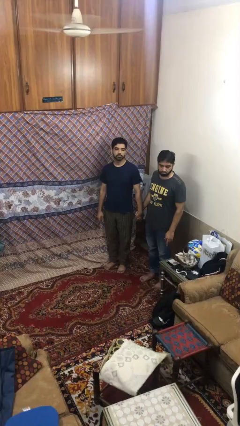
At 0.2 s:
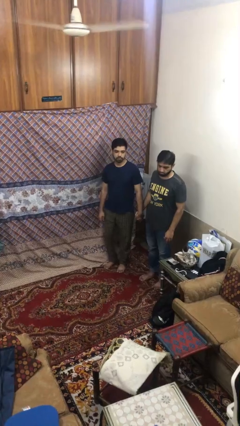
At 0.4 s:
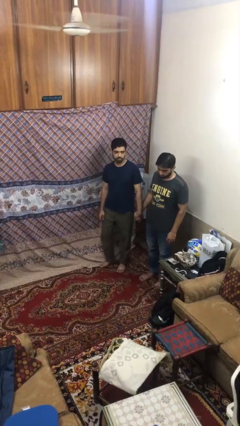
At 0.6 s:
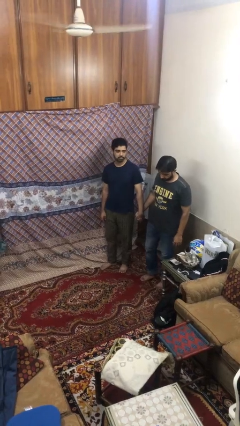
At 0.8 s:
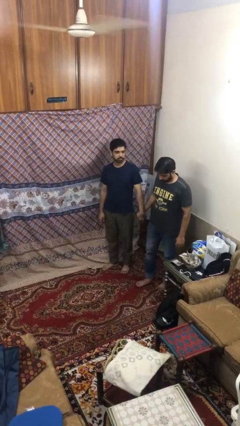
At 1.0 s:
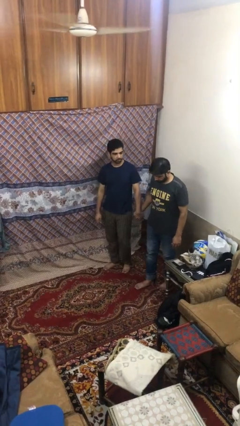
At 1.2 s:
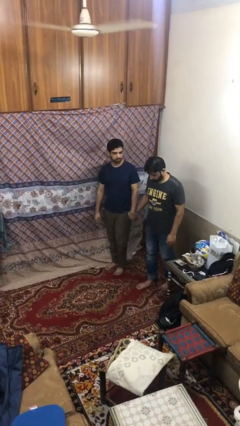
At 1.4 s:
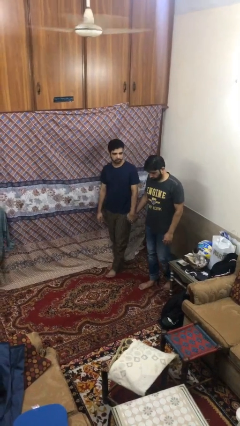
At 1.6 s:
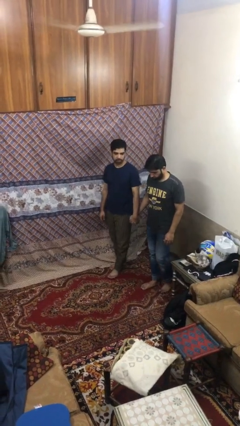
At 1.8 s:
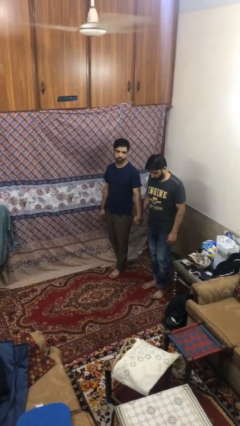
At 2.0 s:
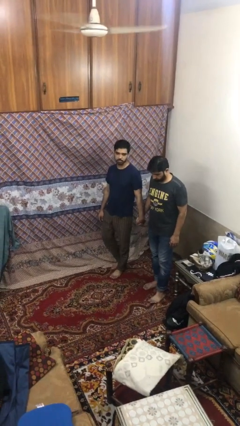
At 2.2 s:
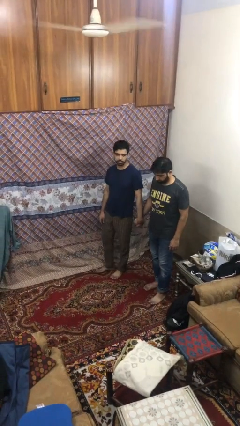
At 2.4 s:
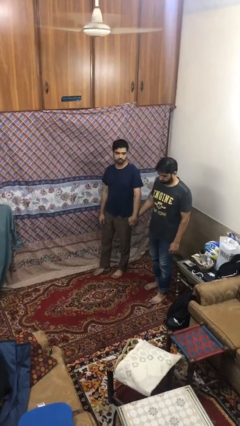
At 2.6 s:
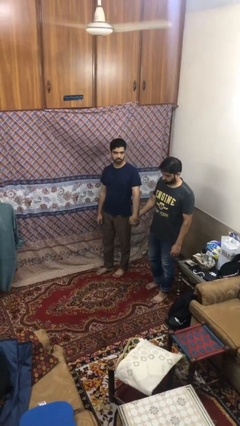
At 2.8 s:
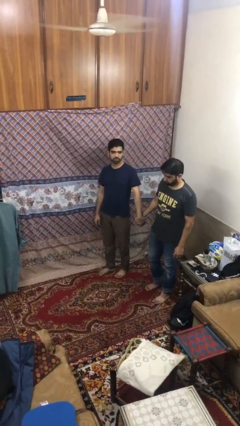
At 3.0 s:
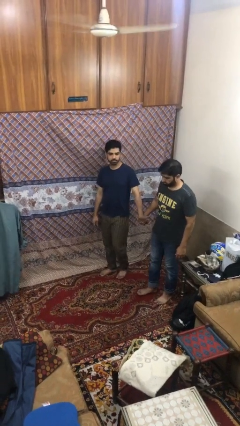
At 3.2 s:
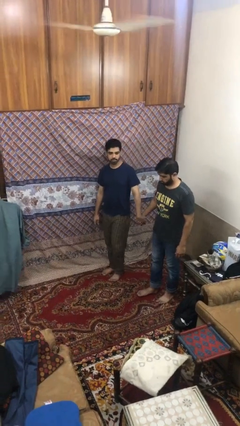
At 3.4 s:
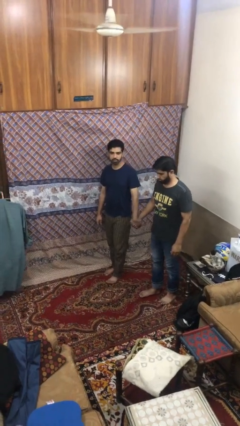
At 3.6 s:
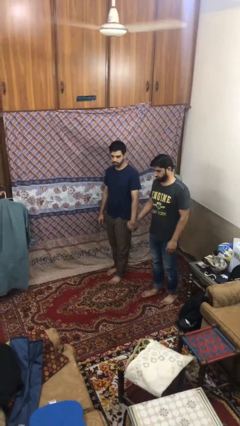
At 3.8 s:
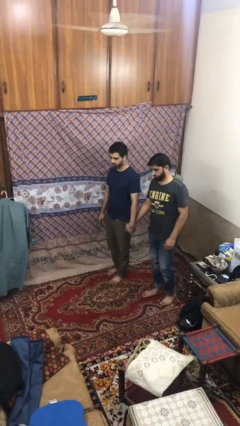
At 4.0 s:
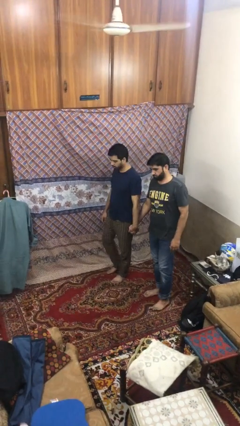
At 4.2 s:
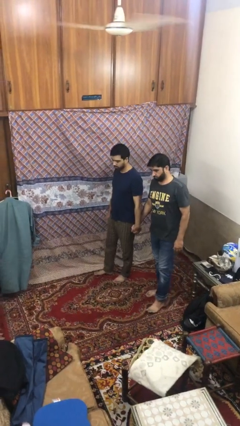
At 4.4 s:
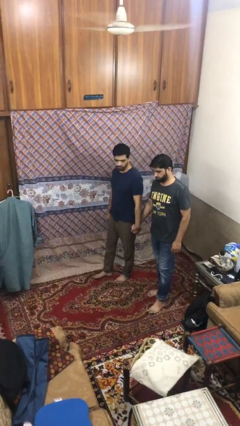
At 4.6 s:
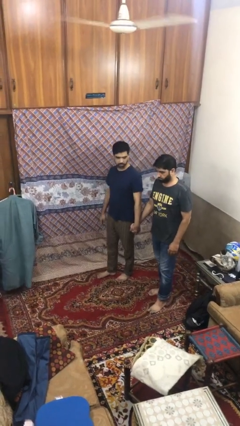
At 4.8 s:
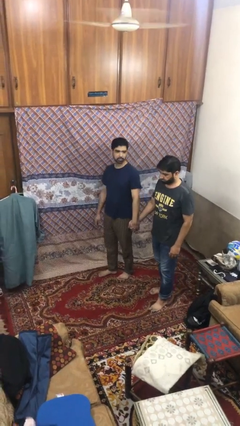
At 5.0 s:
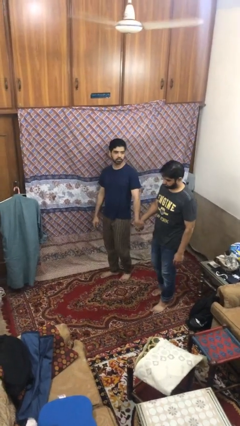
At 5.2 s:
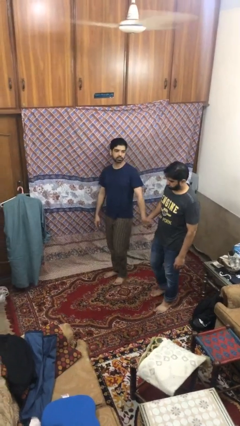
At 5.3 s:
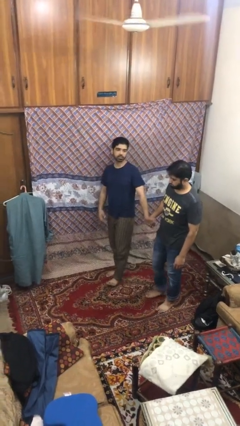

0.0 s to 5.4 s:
person holds hand

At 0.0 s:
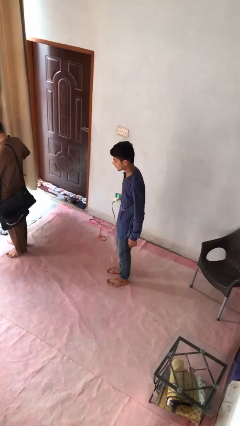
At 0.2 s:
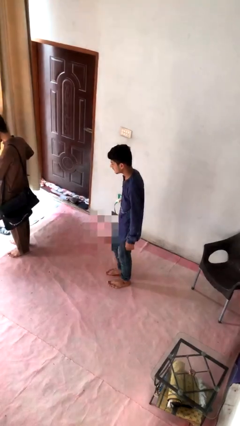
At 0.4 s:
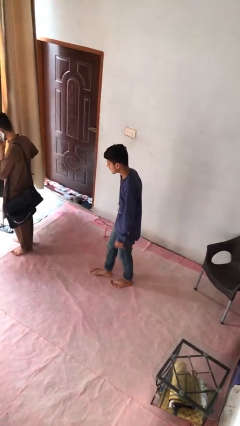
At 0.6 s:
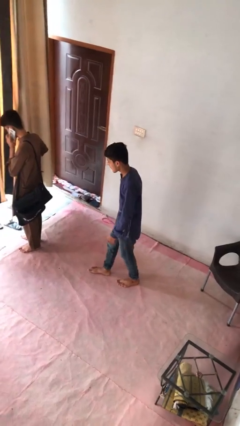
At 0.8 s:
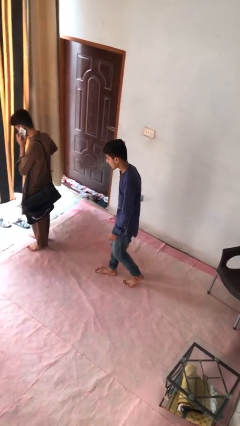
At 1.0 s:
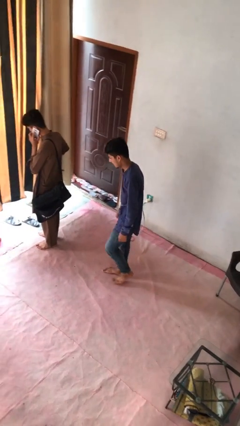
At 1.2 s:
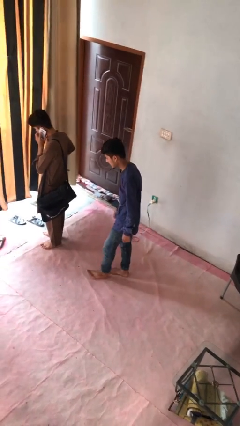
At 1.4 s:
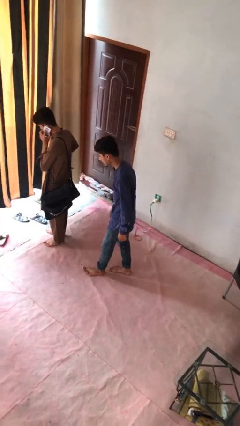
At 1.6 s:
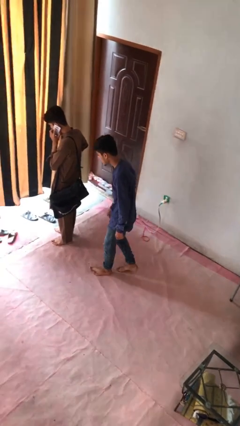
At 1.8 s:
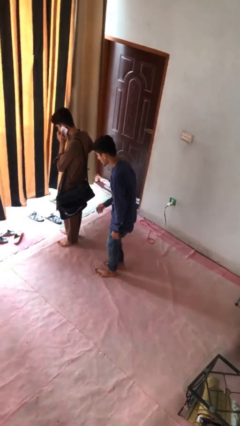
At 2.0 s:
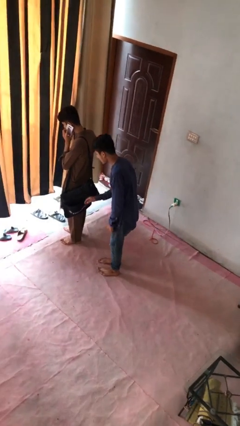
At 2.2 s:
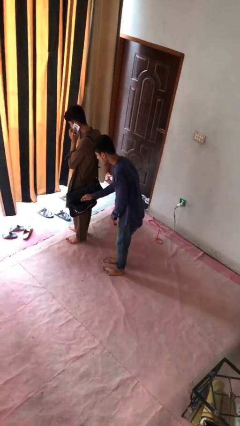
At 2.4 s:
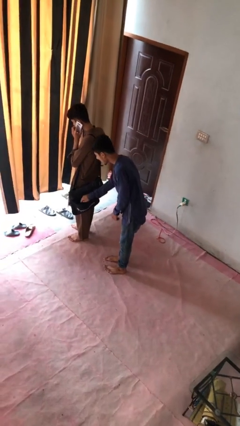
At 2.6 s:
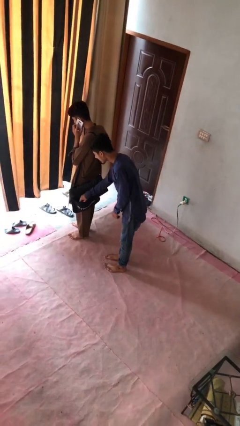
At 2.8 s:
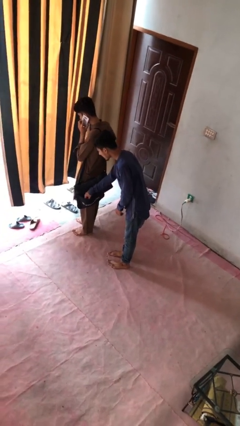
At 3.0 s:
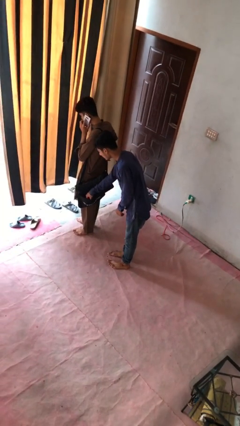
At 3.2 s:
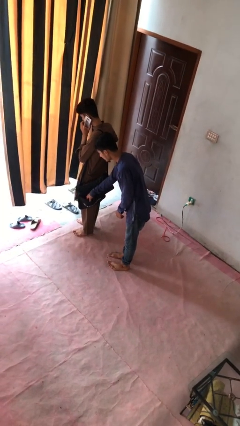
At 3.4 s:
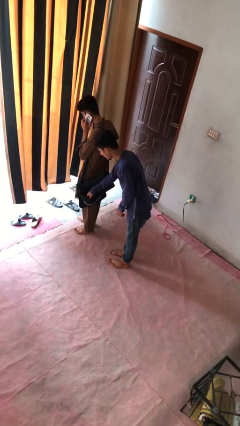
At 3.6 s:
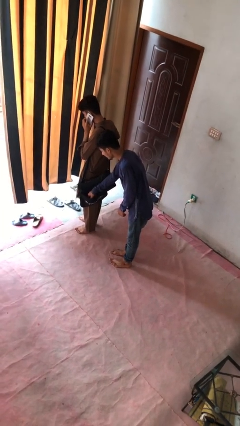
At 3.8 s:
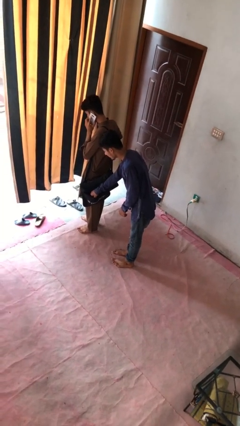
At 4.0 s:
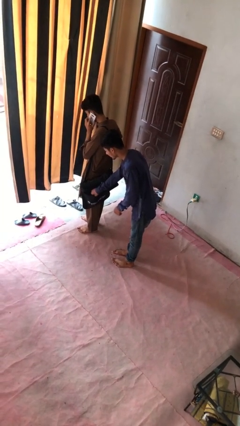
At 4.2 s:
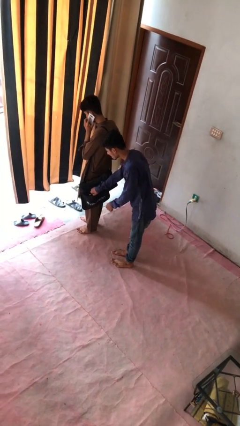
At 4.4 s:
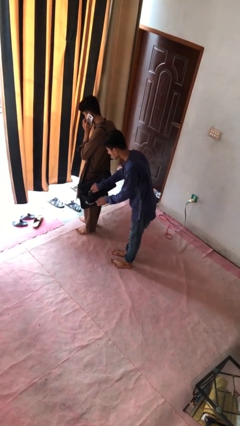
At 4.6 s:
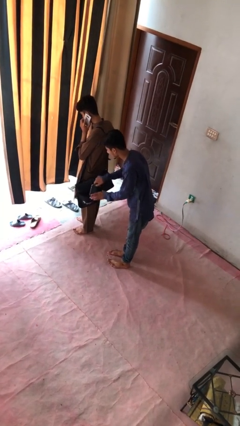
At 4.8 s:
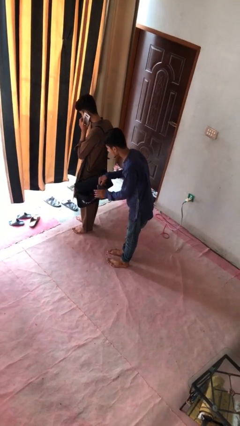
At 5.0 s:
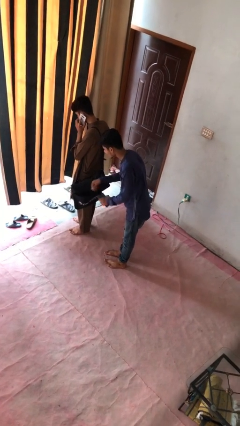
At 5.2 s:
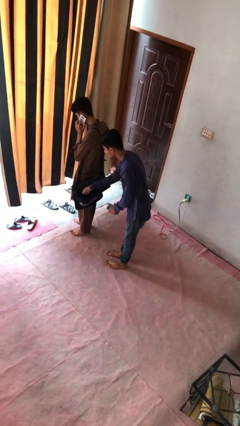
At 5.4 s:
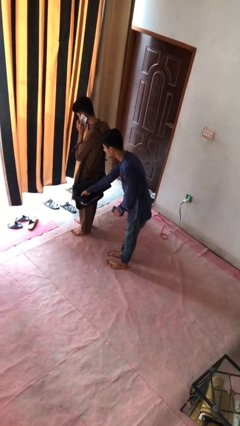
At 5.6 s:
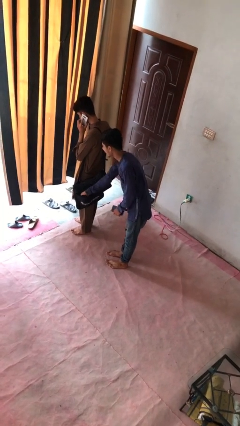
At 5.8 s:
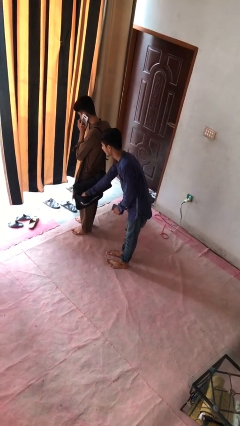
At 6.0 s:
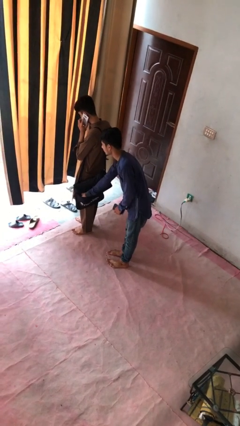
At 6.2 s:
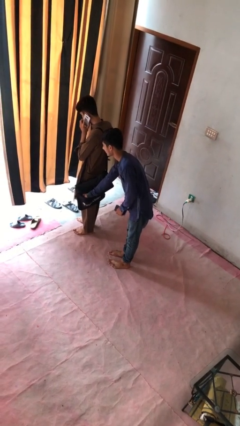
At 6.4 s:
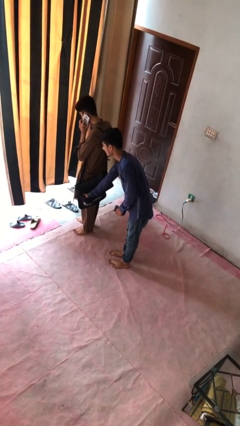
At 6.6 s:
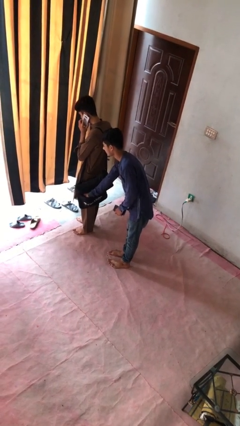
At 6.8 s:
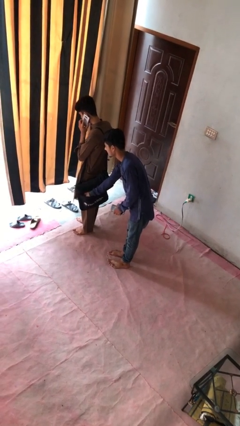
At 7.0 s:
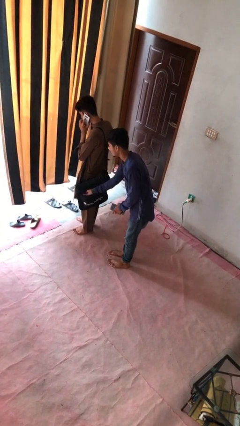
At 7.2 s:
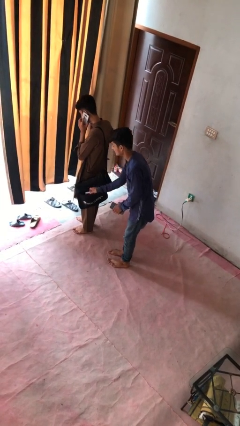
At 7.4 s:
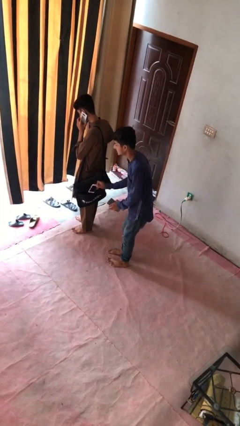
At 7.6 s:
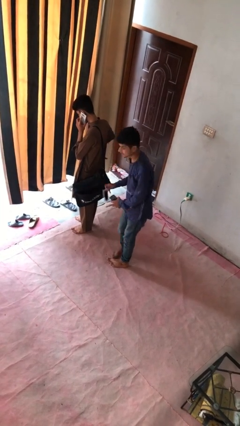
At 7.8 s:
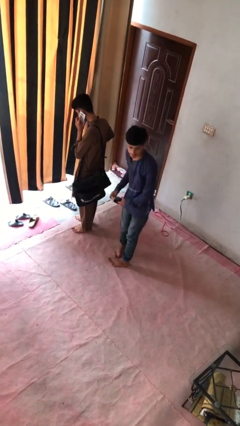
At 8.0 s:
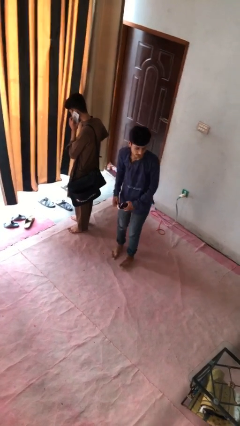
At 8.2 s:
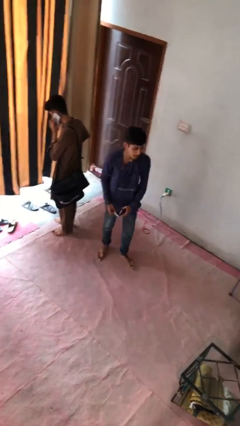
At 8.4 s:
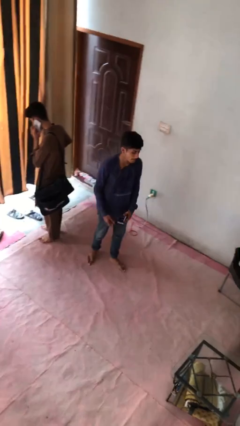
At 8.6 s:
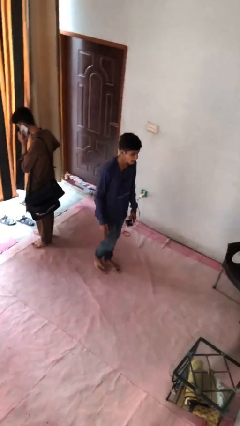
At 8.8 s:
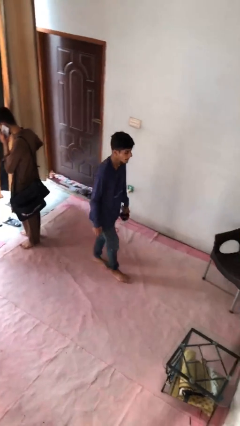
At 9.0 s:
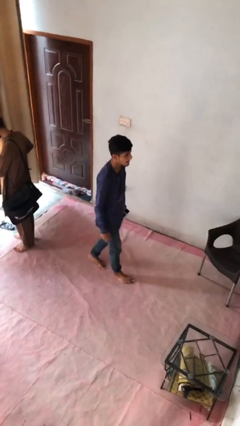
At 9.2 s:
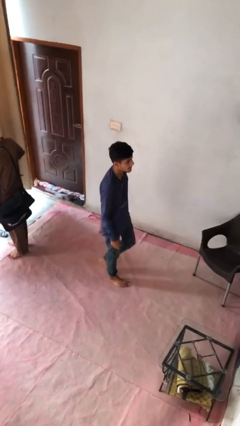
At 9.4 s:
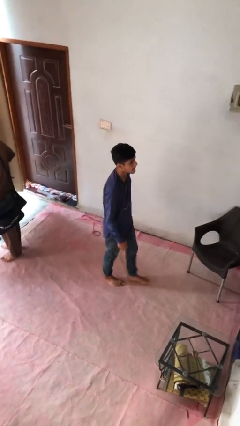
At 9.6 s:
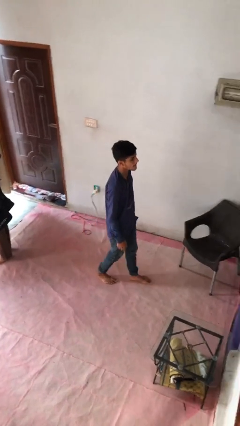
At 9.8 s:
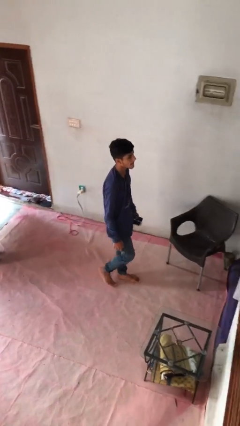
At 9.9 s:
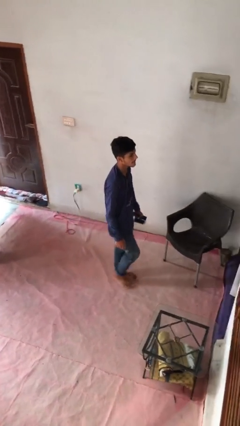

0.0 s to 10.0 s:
person steals object from person

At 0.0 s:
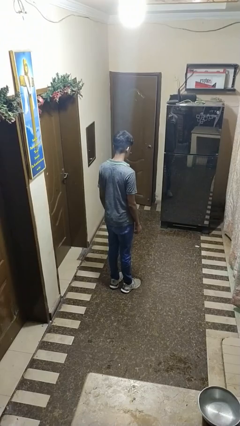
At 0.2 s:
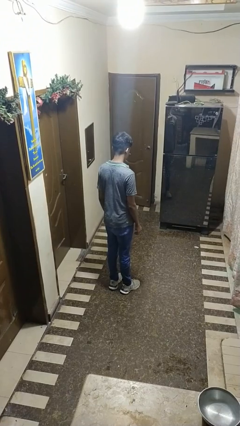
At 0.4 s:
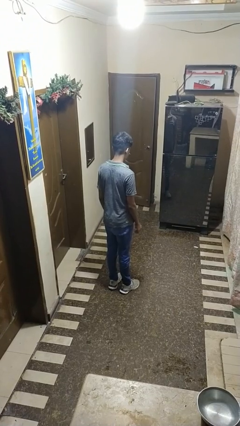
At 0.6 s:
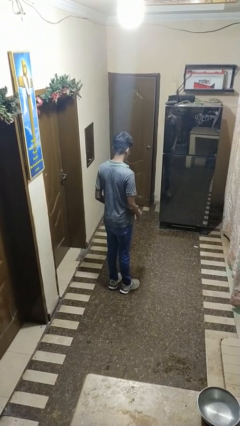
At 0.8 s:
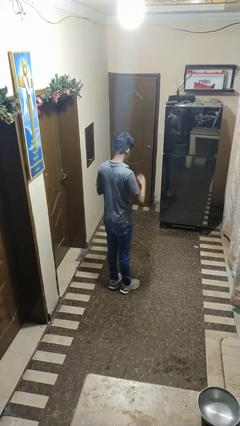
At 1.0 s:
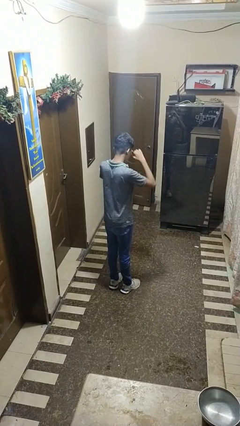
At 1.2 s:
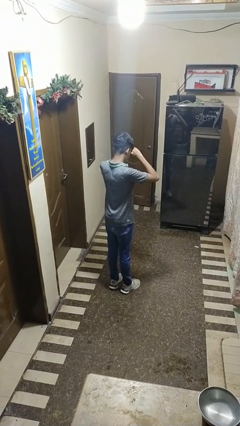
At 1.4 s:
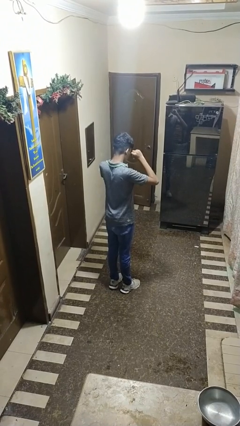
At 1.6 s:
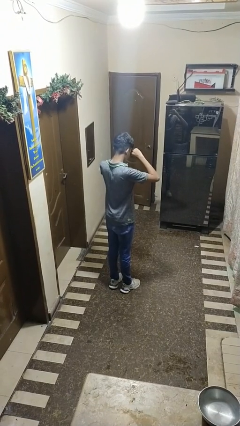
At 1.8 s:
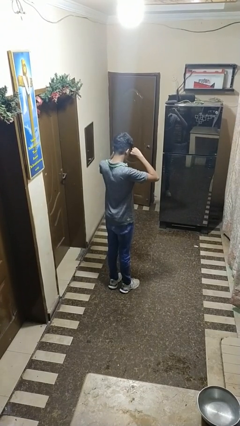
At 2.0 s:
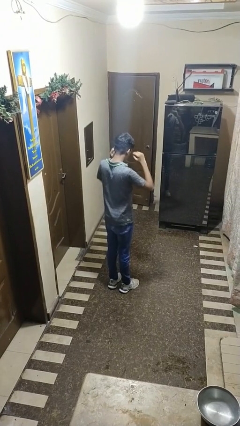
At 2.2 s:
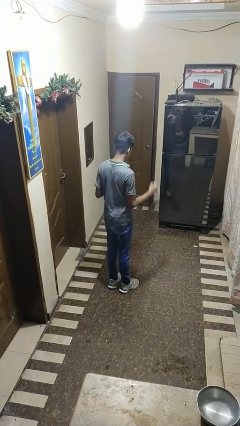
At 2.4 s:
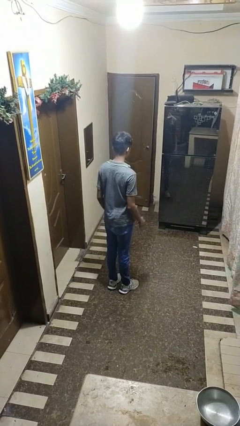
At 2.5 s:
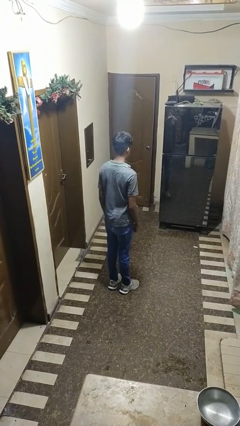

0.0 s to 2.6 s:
person rubs eyes
